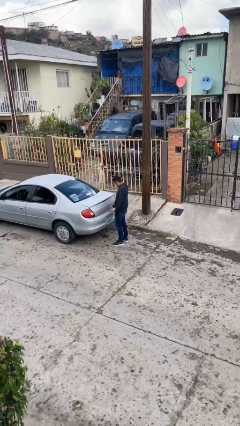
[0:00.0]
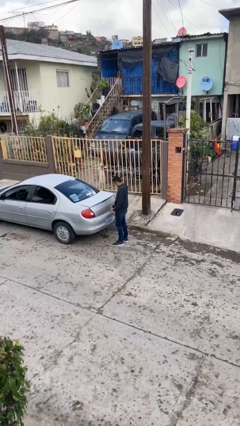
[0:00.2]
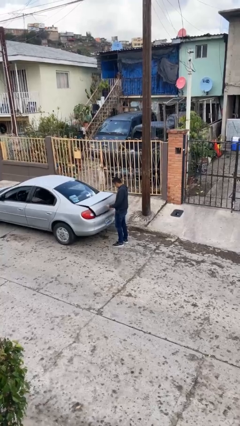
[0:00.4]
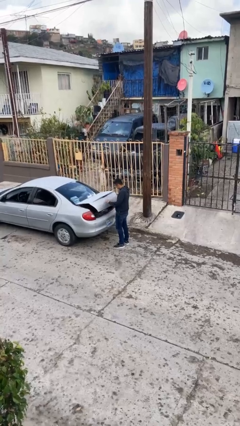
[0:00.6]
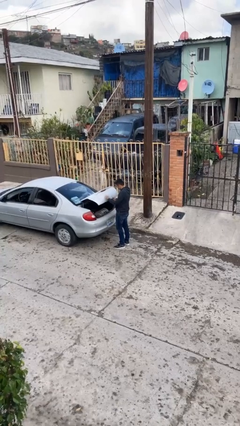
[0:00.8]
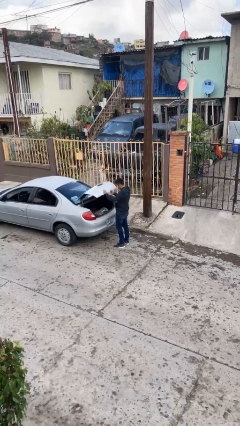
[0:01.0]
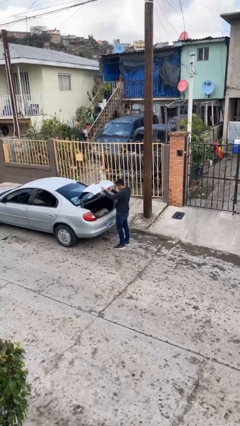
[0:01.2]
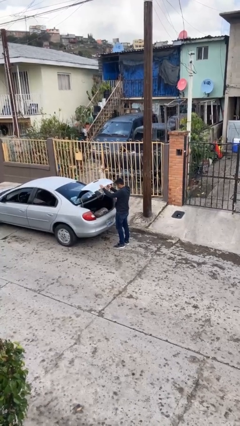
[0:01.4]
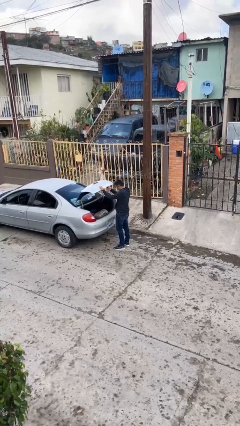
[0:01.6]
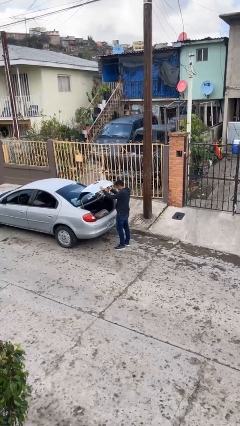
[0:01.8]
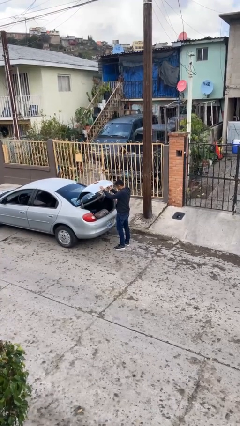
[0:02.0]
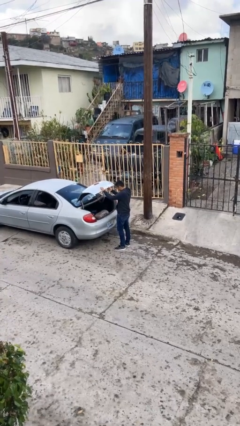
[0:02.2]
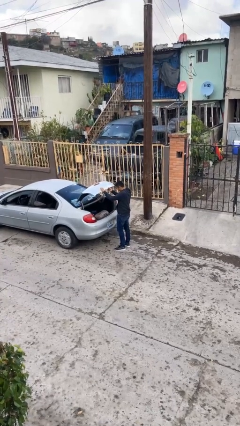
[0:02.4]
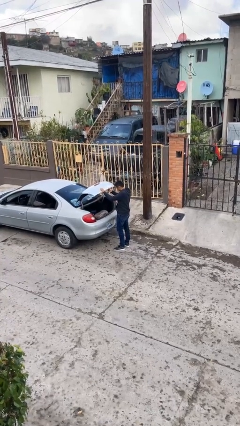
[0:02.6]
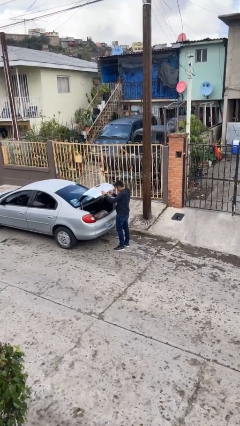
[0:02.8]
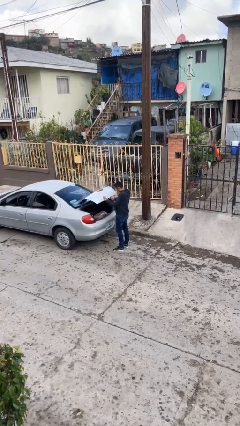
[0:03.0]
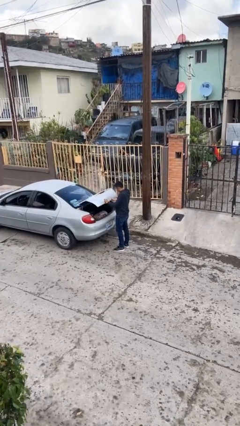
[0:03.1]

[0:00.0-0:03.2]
person opens car trunk

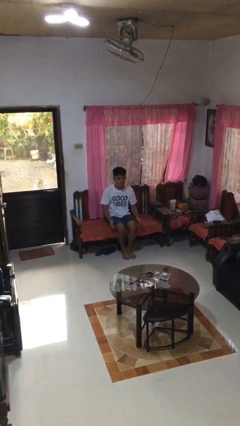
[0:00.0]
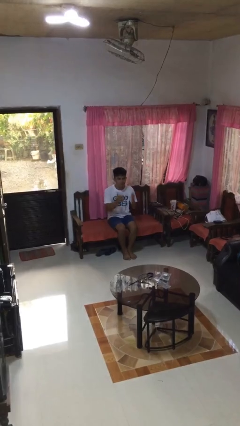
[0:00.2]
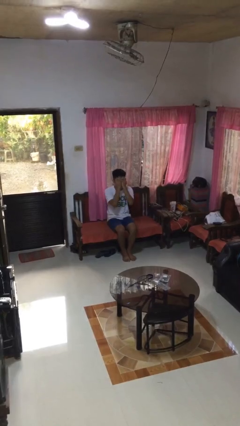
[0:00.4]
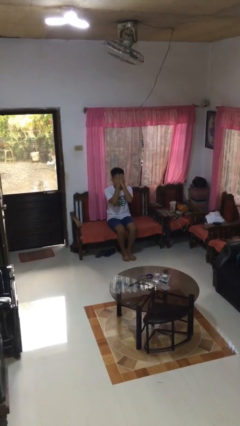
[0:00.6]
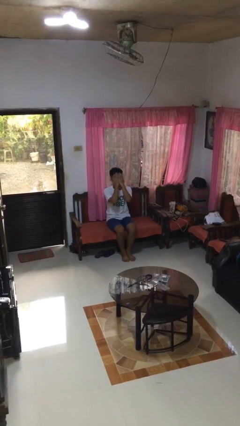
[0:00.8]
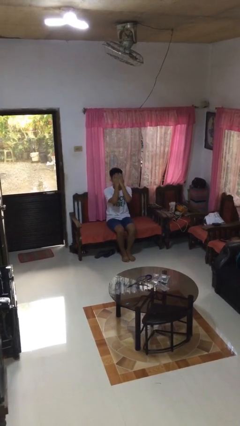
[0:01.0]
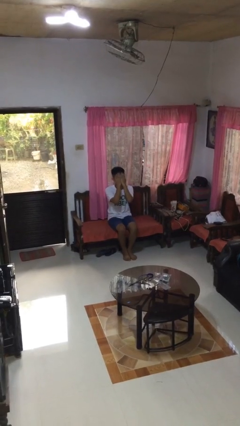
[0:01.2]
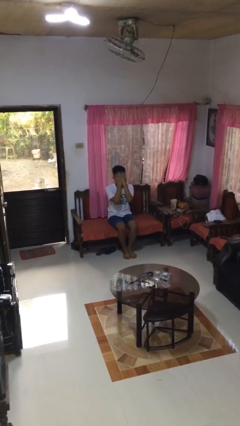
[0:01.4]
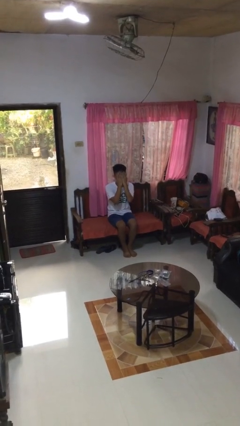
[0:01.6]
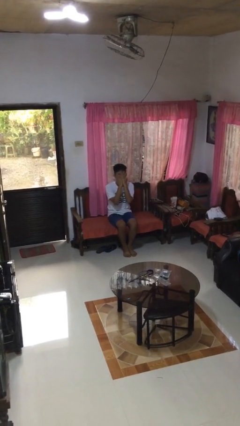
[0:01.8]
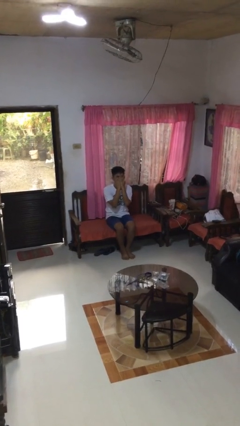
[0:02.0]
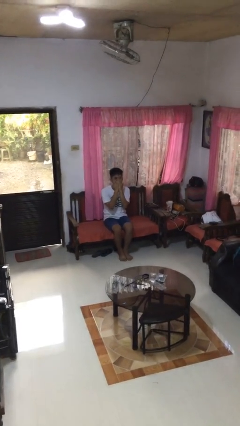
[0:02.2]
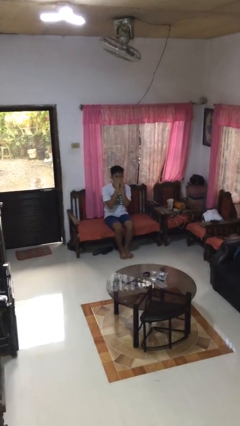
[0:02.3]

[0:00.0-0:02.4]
person covers face with hands

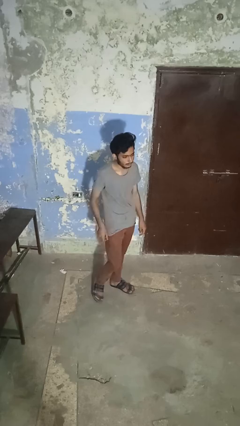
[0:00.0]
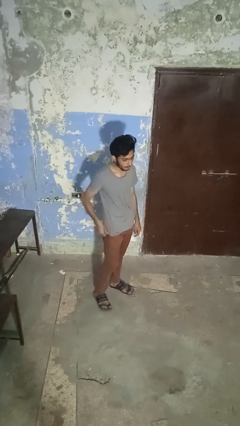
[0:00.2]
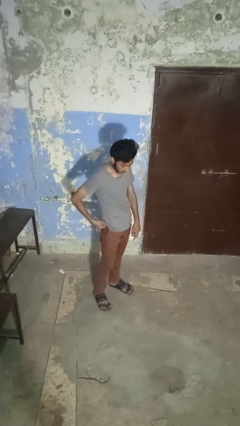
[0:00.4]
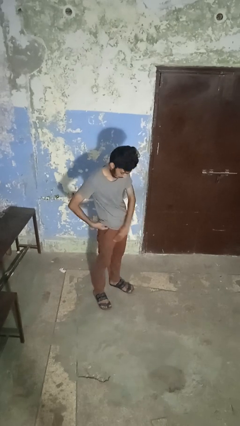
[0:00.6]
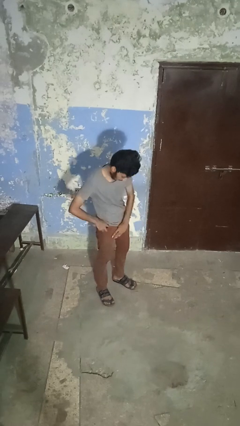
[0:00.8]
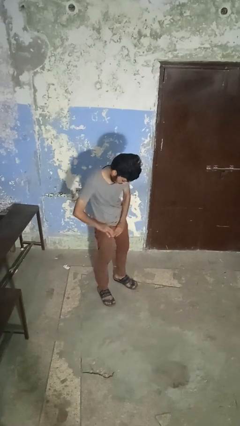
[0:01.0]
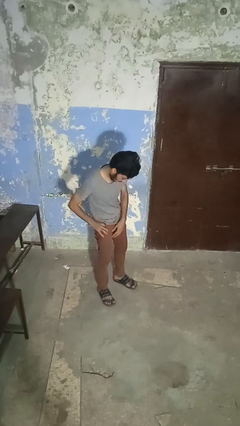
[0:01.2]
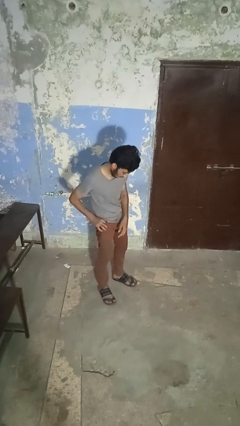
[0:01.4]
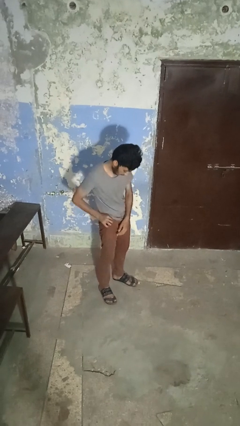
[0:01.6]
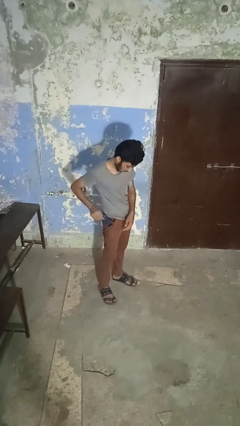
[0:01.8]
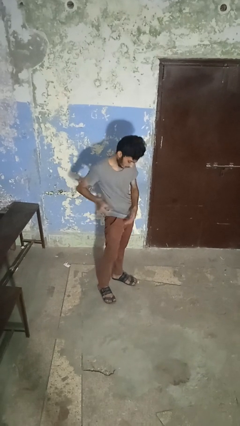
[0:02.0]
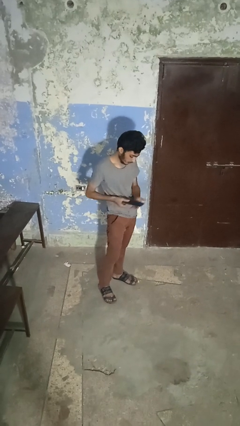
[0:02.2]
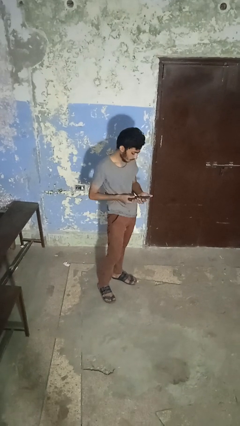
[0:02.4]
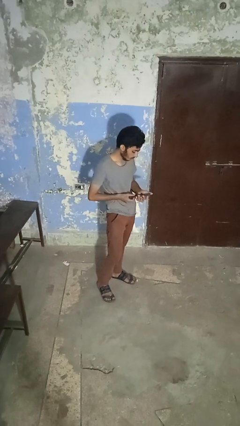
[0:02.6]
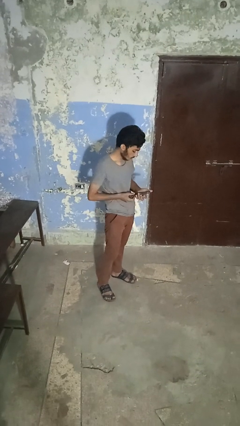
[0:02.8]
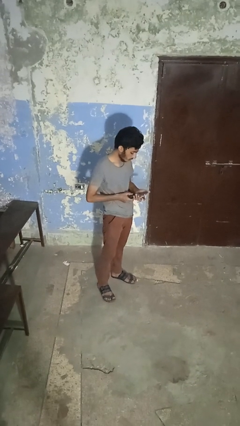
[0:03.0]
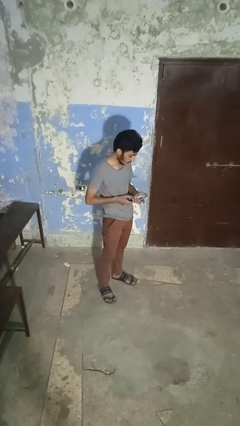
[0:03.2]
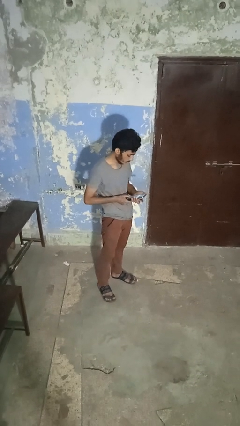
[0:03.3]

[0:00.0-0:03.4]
person takes phone from pocket

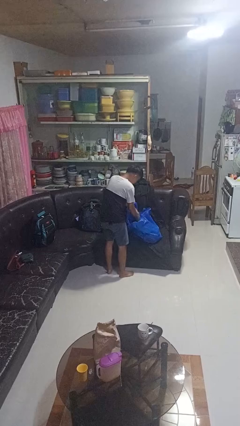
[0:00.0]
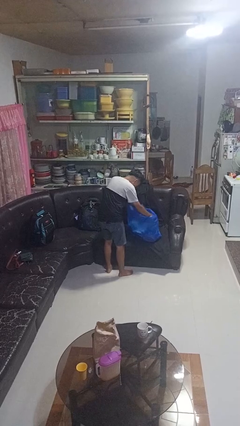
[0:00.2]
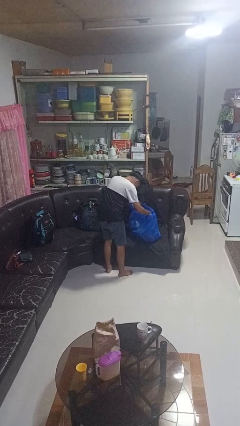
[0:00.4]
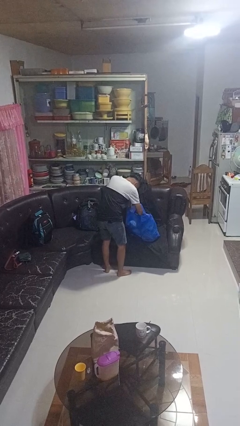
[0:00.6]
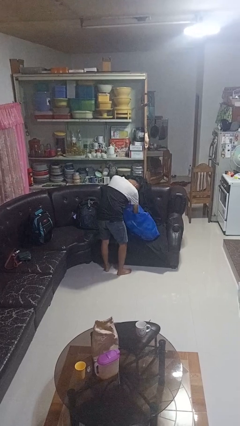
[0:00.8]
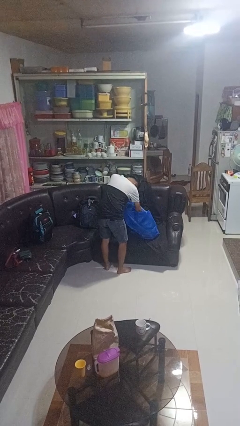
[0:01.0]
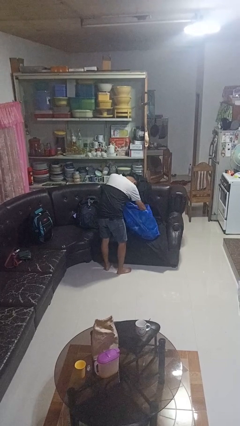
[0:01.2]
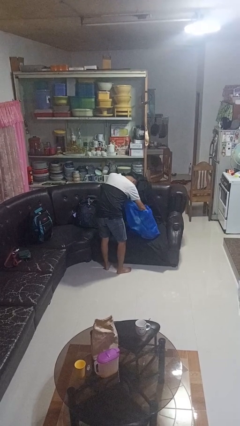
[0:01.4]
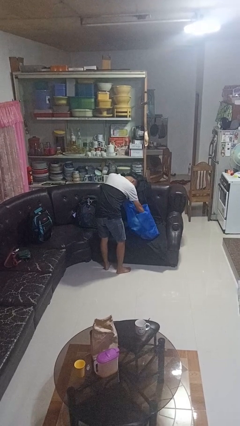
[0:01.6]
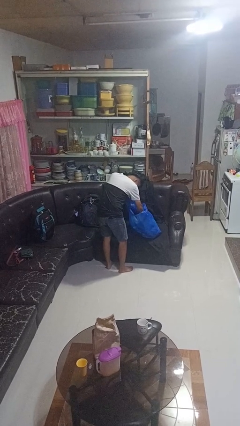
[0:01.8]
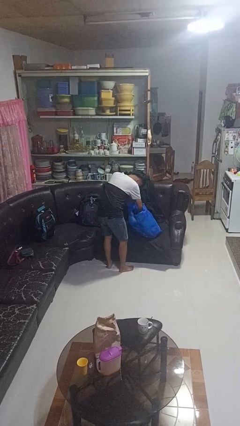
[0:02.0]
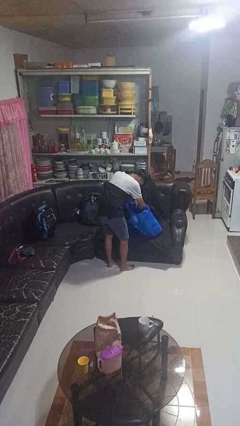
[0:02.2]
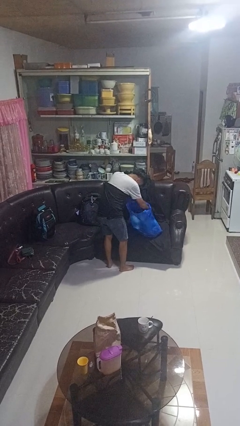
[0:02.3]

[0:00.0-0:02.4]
person searches in bag

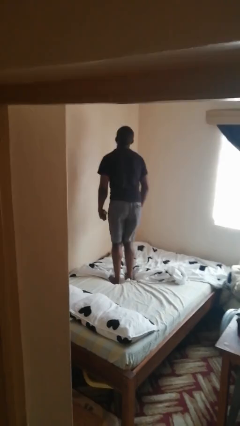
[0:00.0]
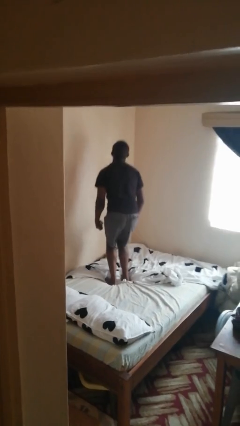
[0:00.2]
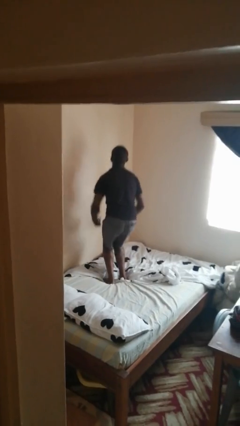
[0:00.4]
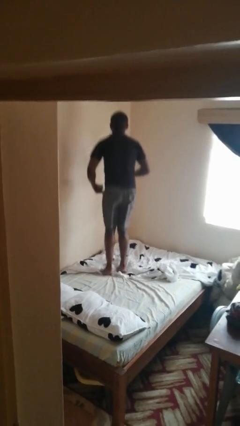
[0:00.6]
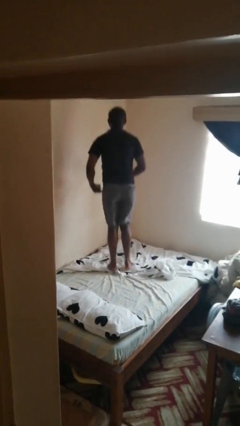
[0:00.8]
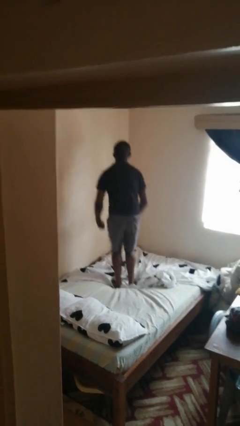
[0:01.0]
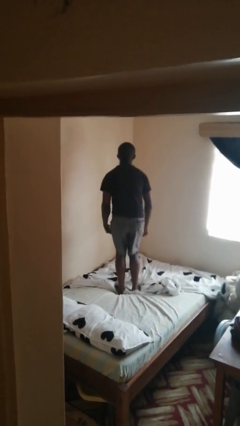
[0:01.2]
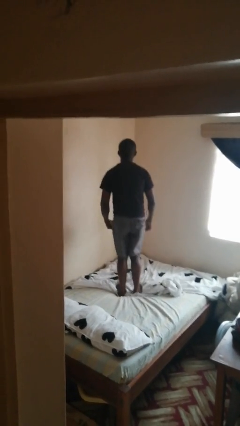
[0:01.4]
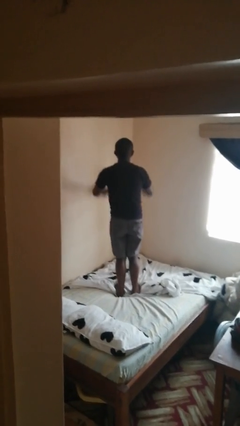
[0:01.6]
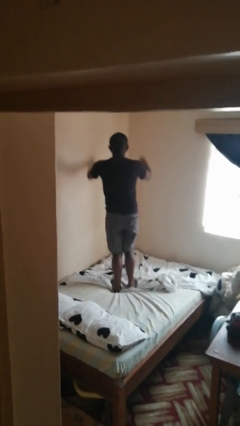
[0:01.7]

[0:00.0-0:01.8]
person jumps on bed

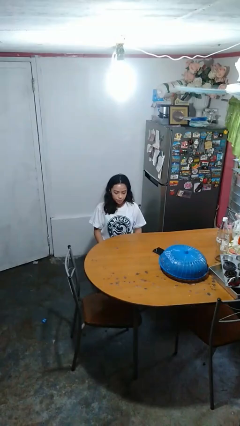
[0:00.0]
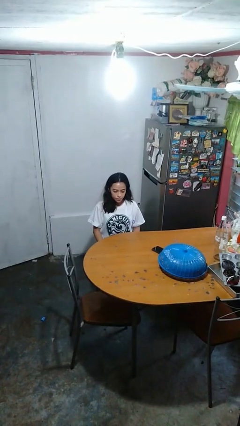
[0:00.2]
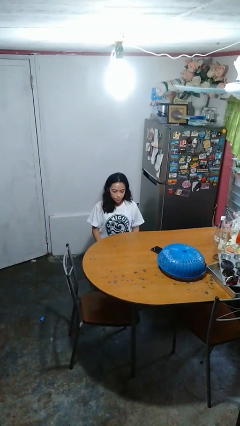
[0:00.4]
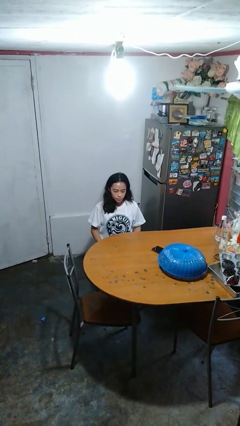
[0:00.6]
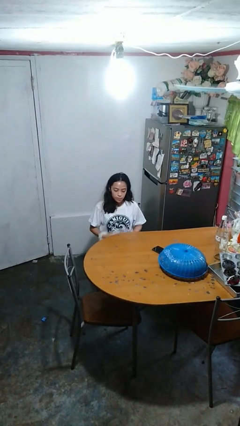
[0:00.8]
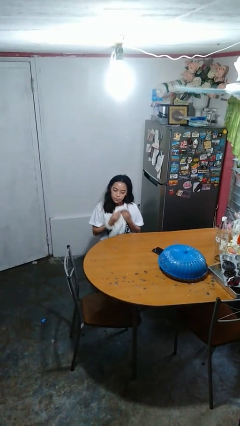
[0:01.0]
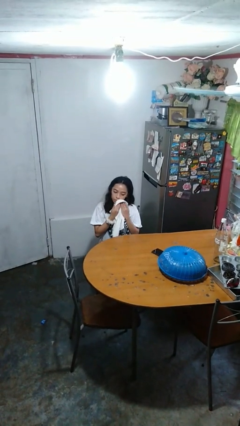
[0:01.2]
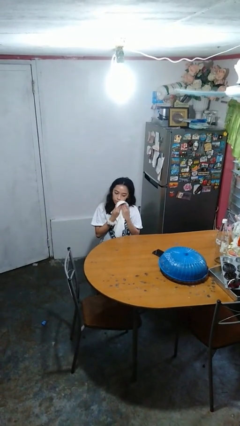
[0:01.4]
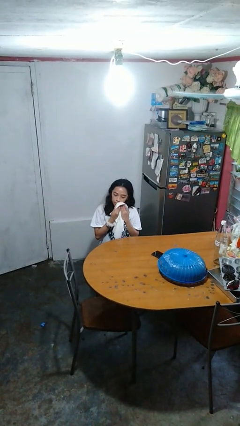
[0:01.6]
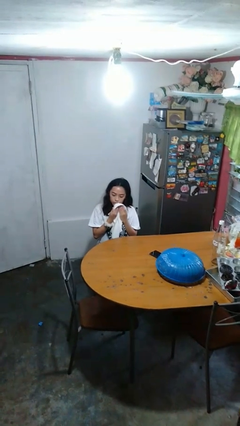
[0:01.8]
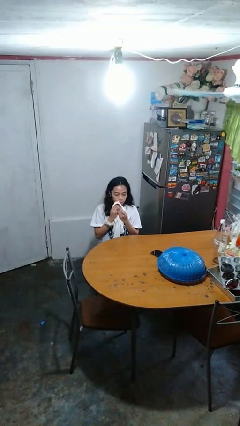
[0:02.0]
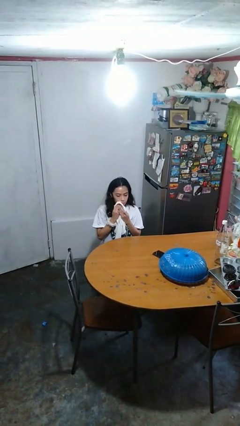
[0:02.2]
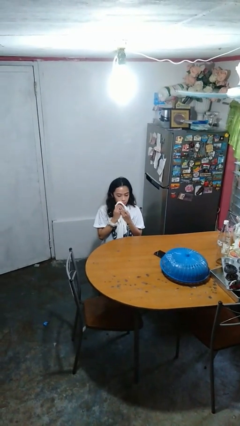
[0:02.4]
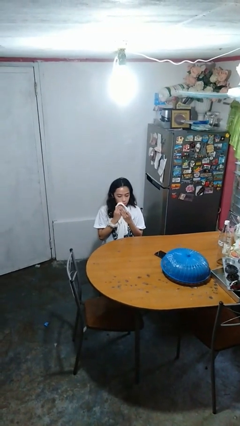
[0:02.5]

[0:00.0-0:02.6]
person wipes mouth with napkin

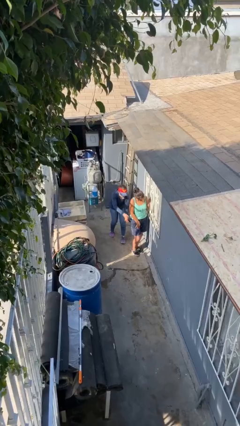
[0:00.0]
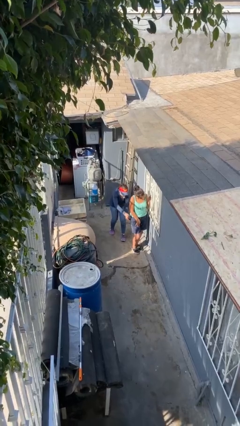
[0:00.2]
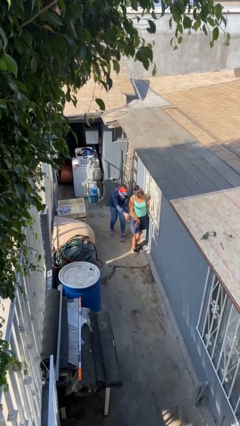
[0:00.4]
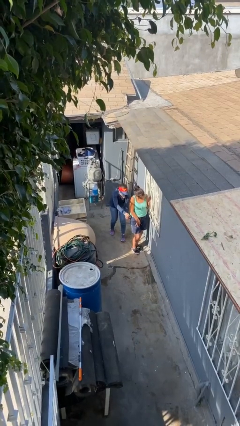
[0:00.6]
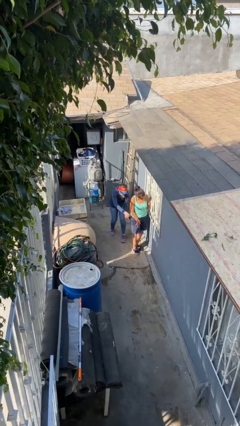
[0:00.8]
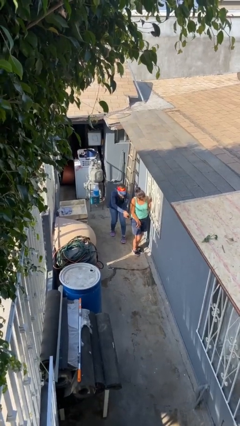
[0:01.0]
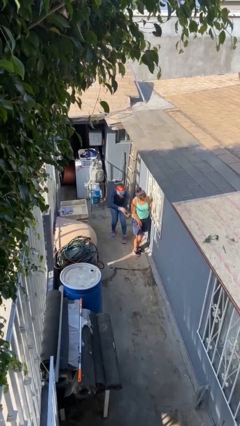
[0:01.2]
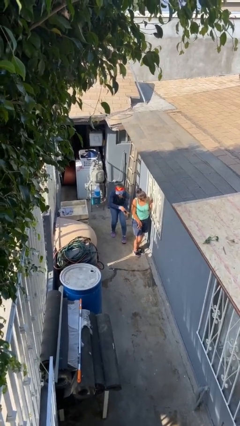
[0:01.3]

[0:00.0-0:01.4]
person steals object from person
